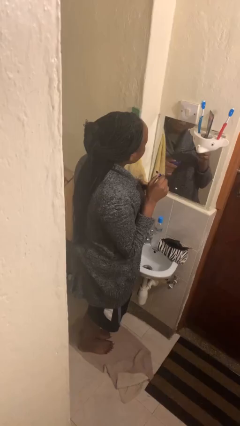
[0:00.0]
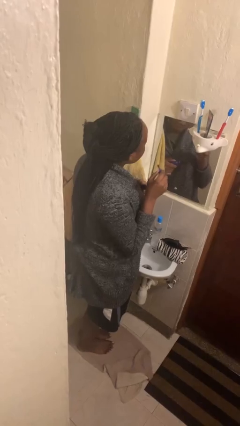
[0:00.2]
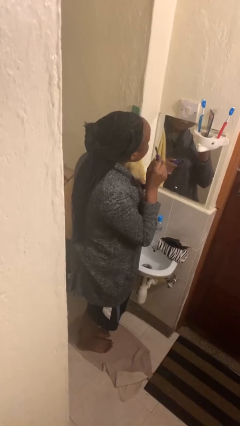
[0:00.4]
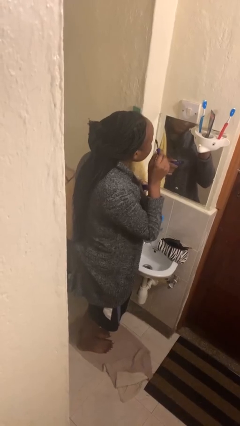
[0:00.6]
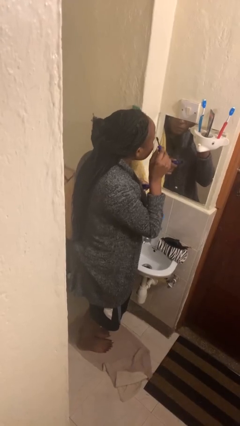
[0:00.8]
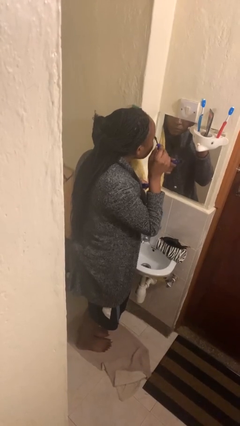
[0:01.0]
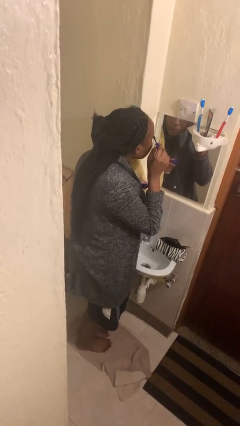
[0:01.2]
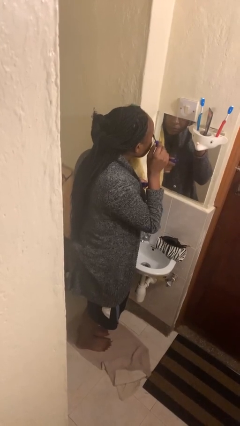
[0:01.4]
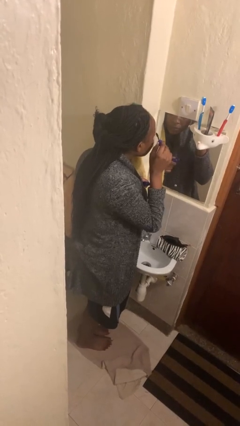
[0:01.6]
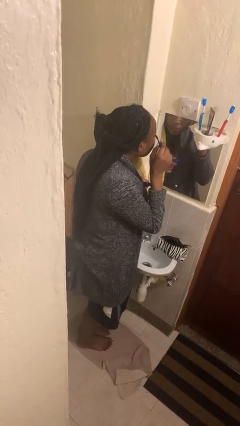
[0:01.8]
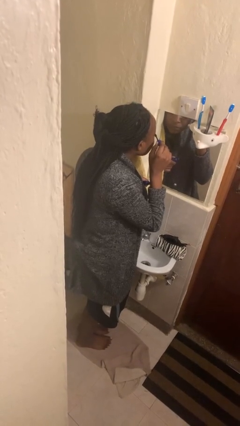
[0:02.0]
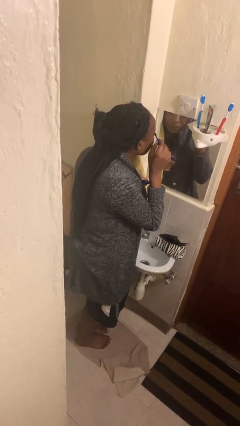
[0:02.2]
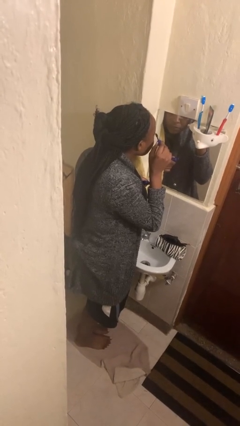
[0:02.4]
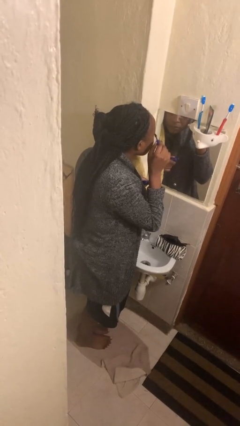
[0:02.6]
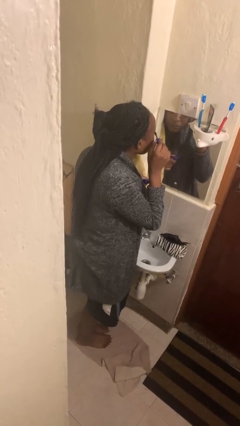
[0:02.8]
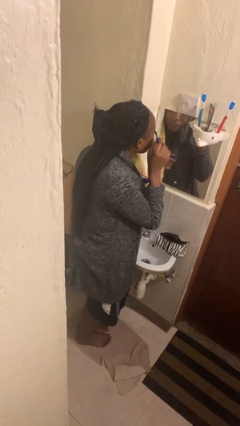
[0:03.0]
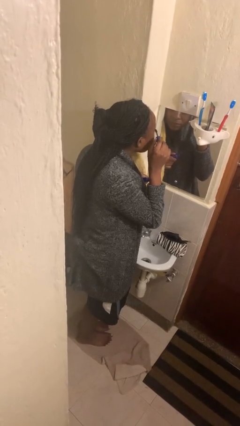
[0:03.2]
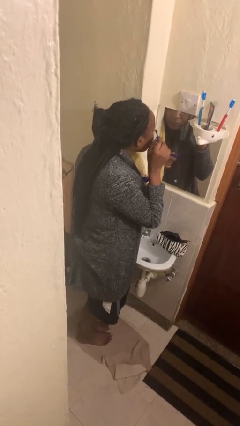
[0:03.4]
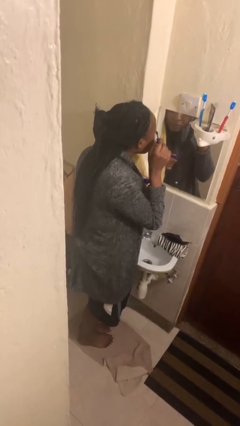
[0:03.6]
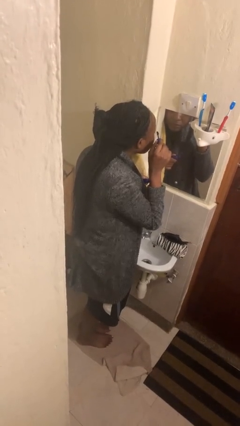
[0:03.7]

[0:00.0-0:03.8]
person applies eye makeup

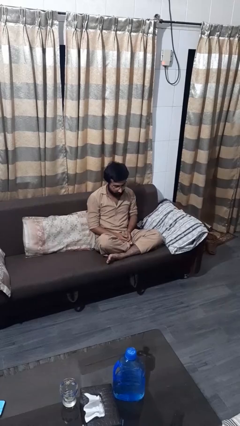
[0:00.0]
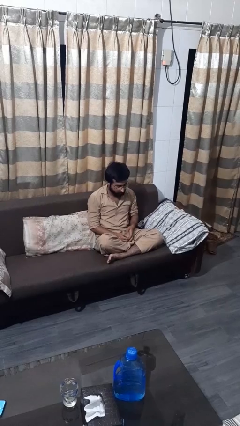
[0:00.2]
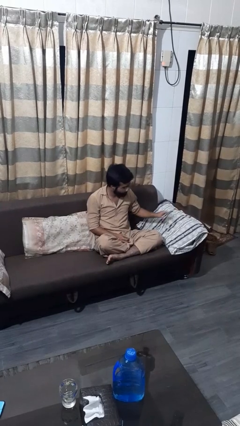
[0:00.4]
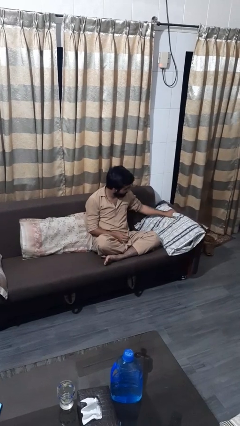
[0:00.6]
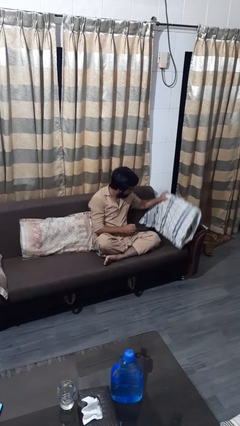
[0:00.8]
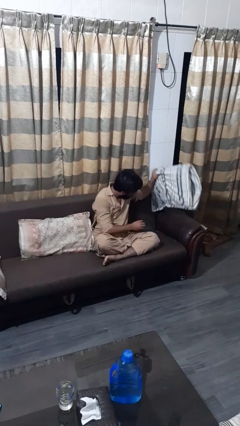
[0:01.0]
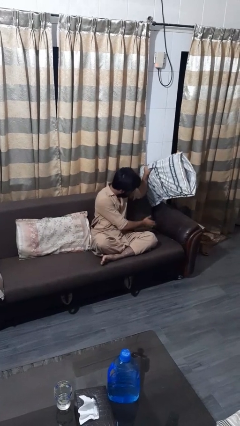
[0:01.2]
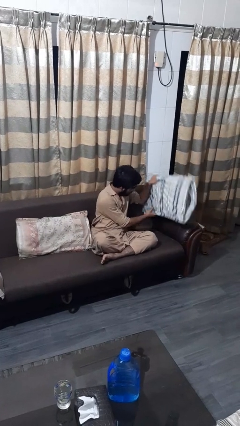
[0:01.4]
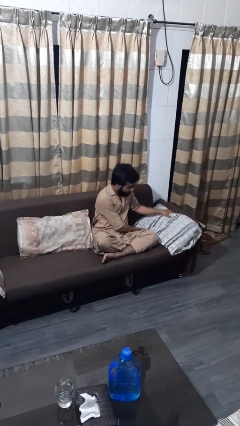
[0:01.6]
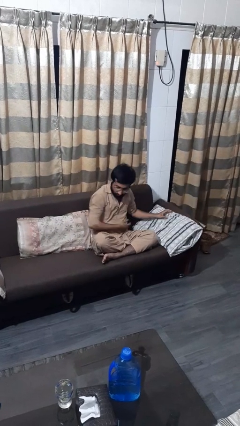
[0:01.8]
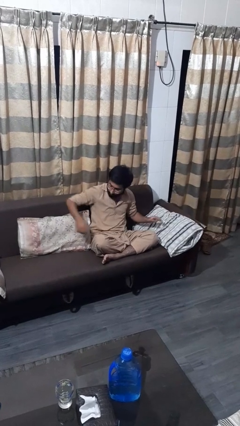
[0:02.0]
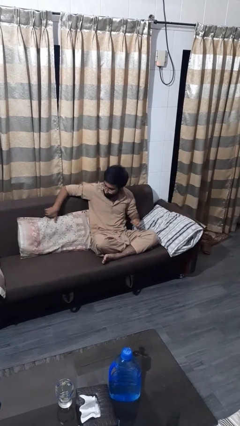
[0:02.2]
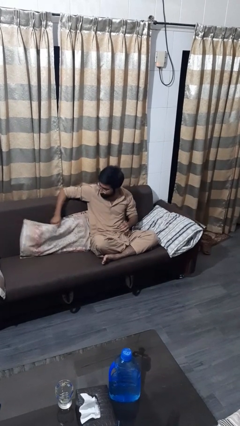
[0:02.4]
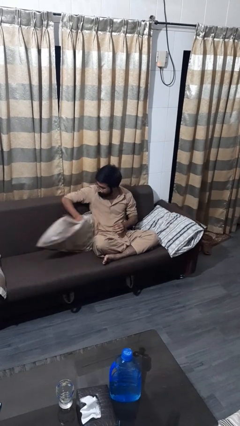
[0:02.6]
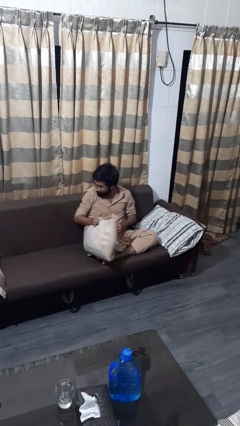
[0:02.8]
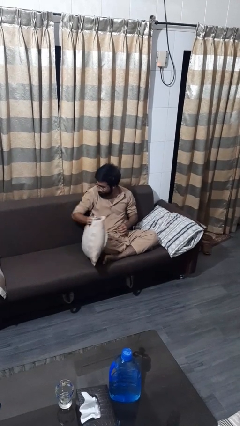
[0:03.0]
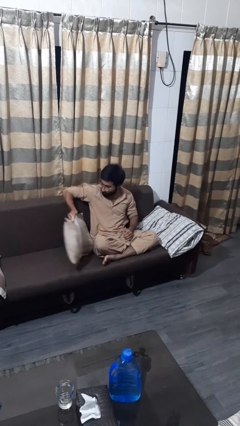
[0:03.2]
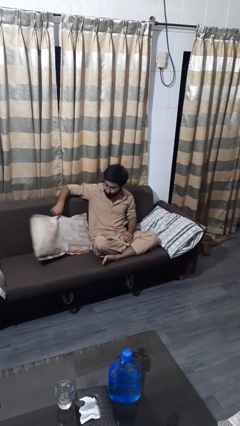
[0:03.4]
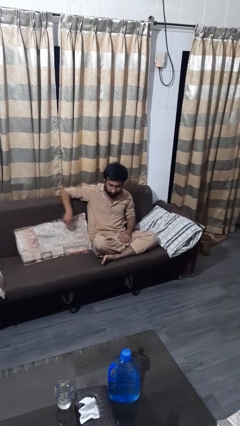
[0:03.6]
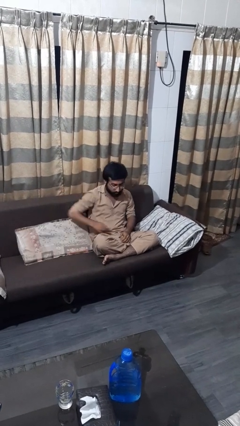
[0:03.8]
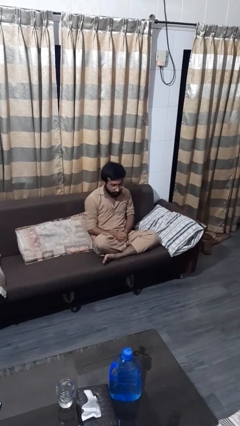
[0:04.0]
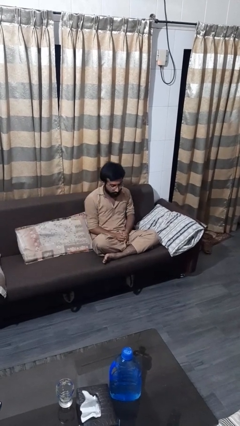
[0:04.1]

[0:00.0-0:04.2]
person searches in couch

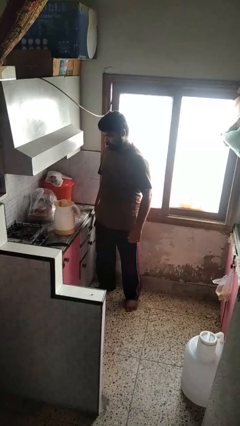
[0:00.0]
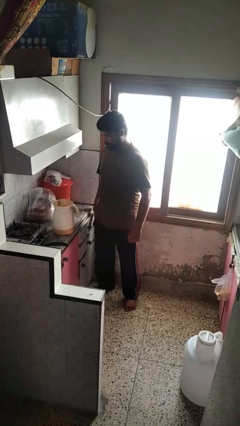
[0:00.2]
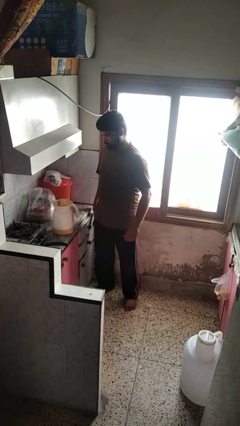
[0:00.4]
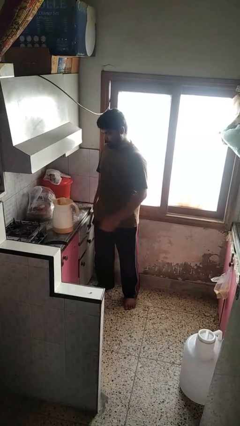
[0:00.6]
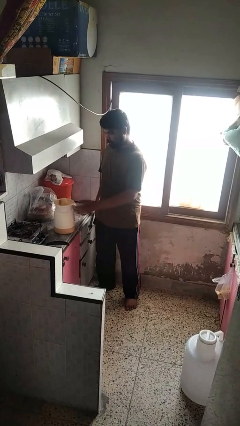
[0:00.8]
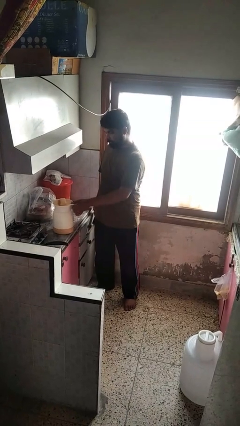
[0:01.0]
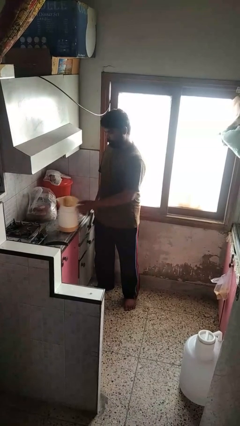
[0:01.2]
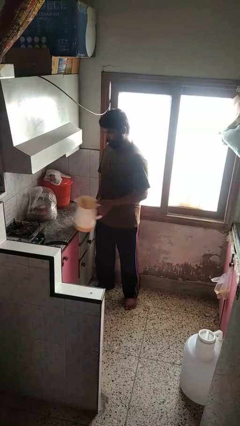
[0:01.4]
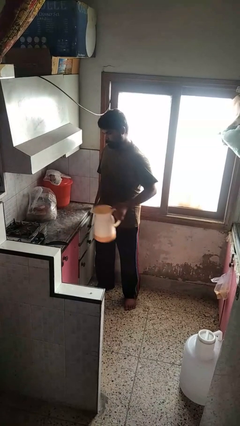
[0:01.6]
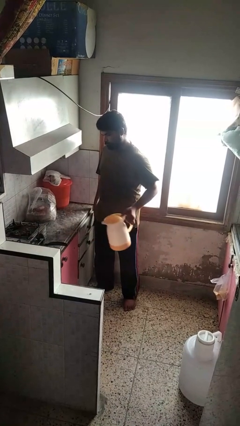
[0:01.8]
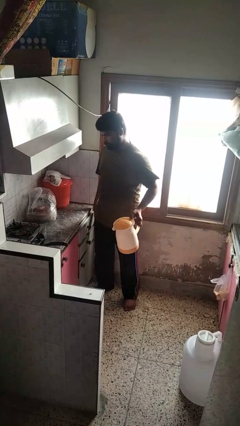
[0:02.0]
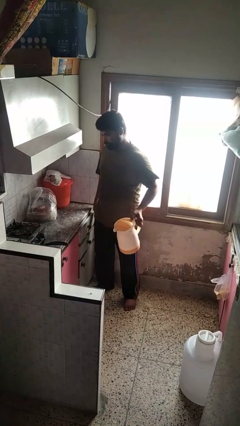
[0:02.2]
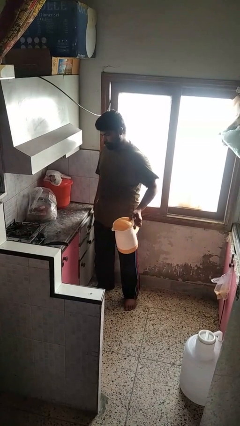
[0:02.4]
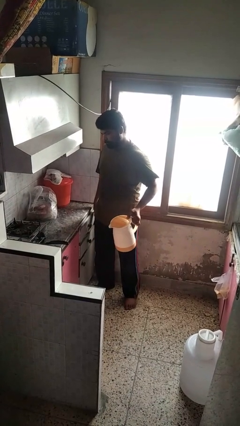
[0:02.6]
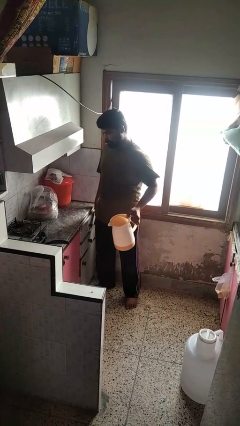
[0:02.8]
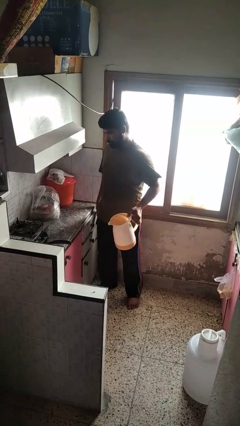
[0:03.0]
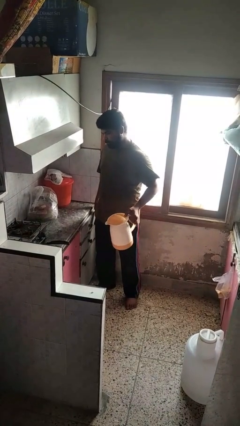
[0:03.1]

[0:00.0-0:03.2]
person picks up object from countertop

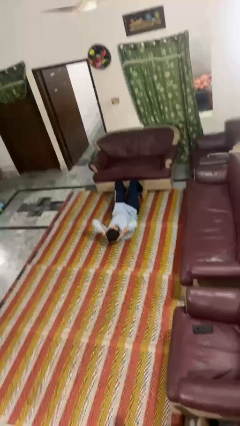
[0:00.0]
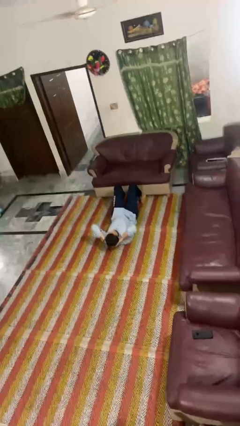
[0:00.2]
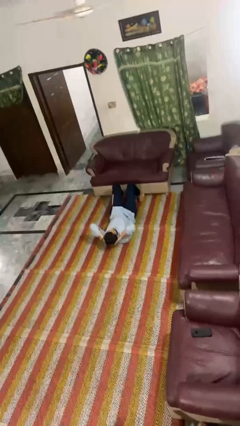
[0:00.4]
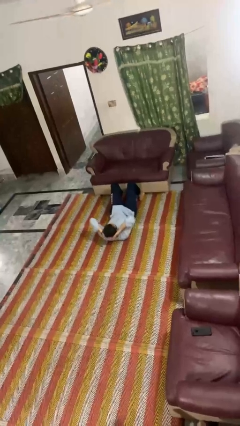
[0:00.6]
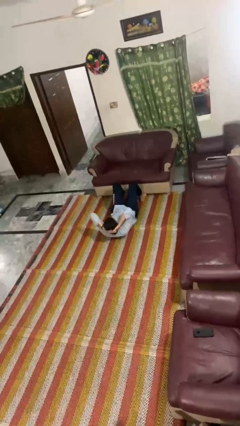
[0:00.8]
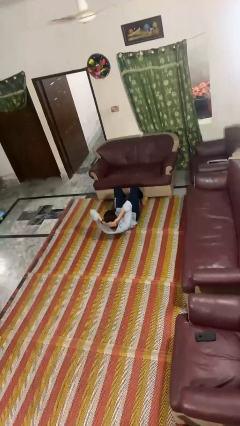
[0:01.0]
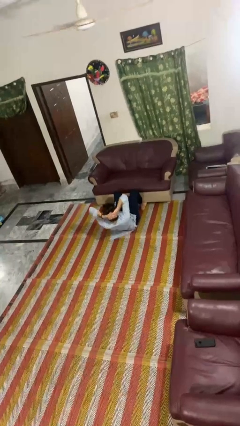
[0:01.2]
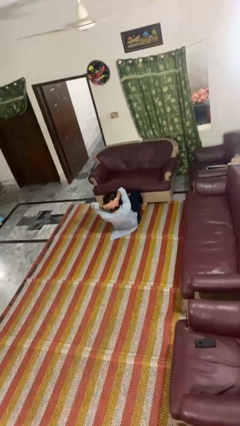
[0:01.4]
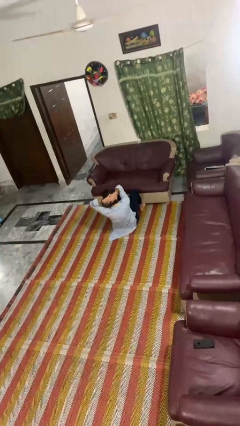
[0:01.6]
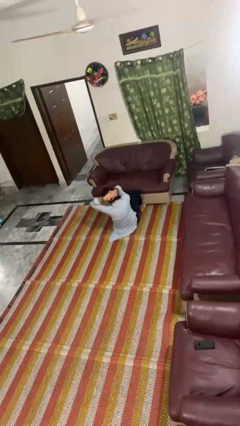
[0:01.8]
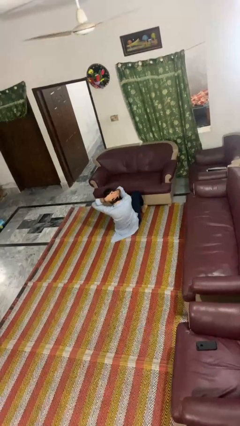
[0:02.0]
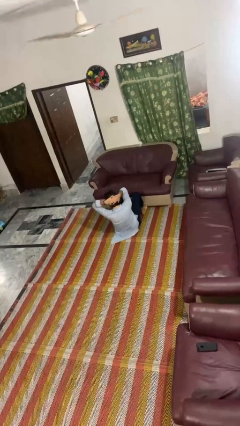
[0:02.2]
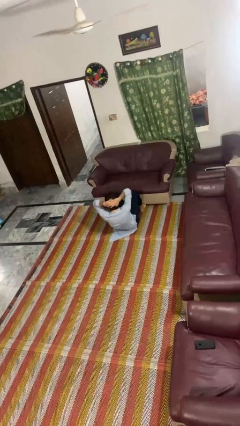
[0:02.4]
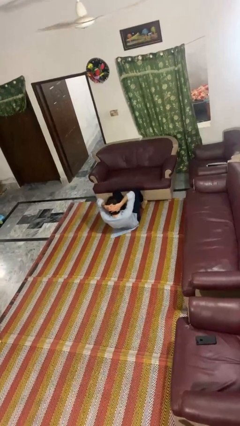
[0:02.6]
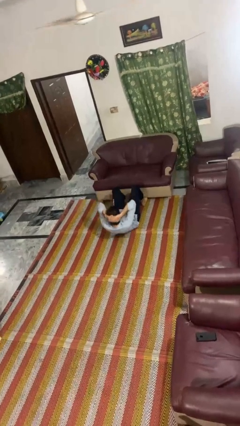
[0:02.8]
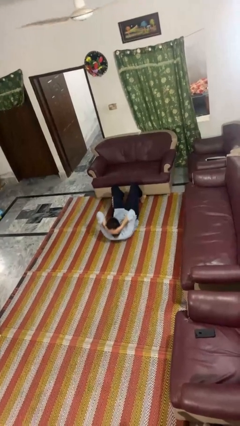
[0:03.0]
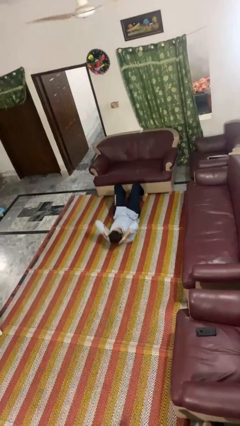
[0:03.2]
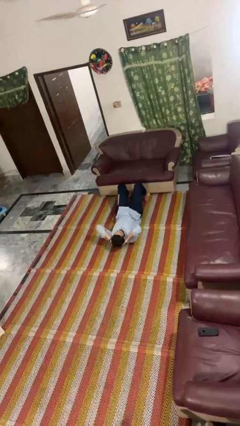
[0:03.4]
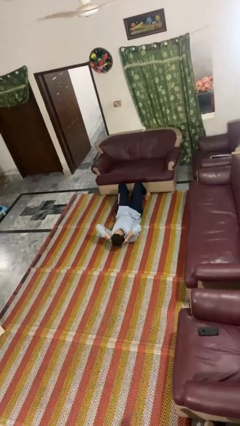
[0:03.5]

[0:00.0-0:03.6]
person exercises with situp

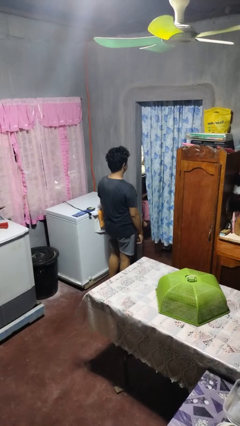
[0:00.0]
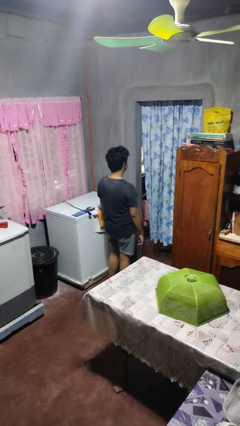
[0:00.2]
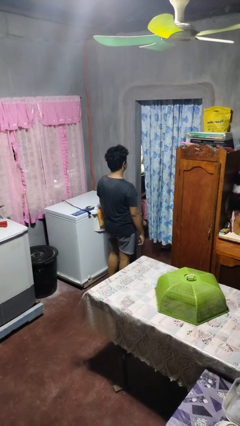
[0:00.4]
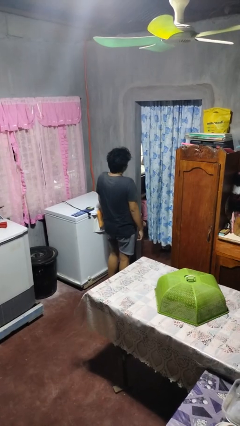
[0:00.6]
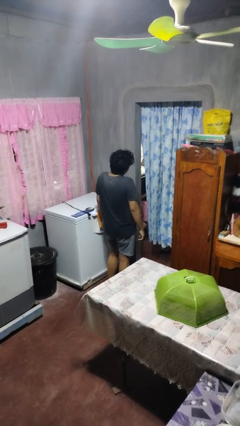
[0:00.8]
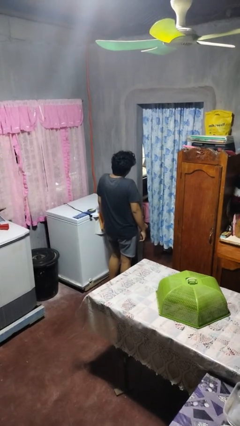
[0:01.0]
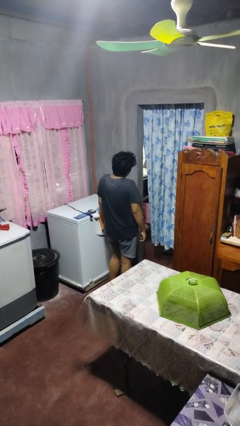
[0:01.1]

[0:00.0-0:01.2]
person shrugs

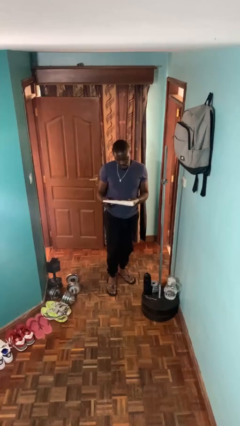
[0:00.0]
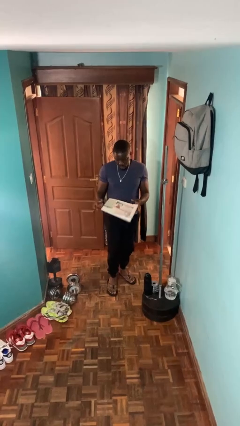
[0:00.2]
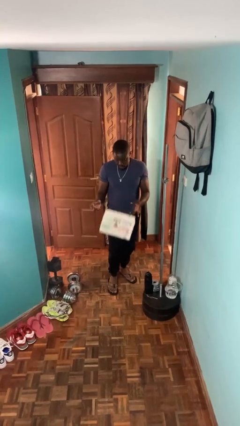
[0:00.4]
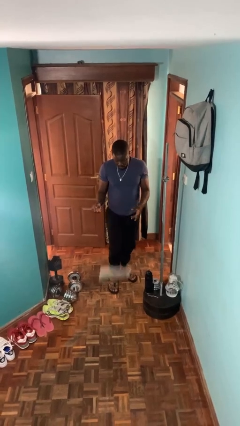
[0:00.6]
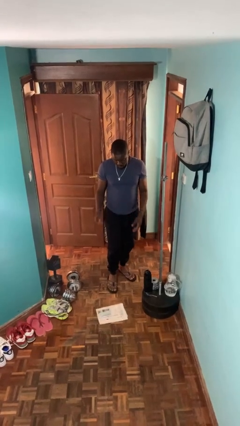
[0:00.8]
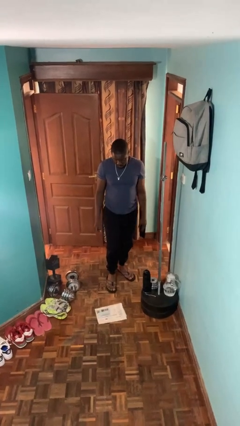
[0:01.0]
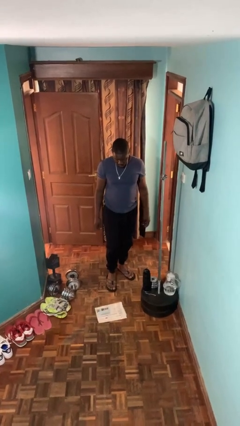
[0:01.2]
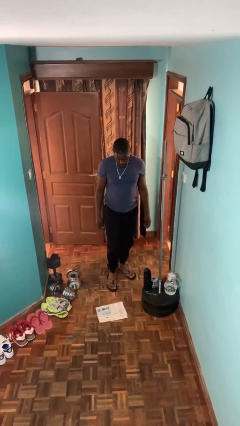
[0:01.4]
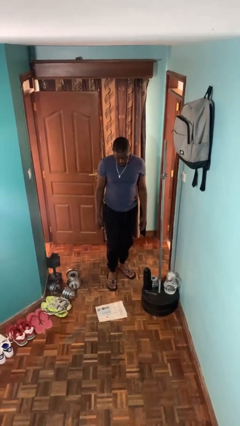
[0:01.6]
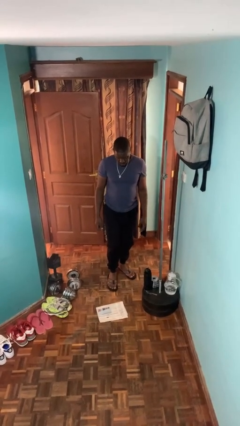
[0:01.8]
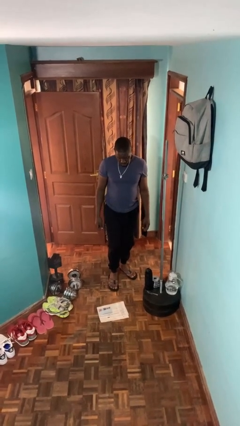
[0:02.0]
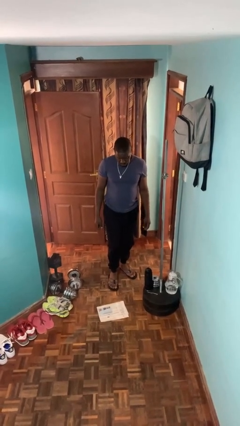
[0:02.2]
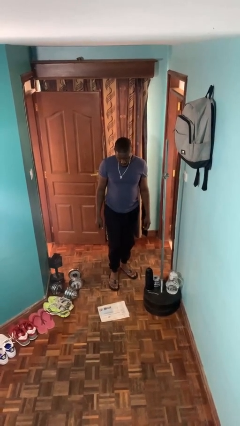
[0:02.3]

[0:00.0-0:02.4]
person drops object
